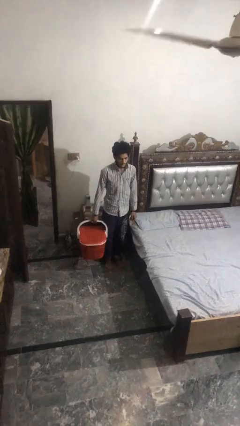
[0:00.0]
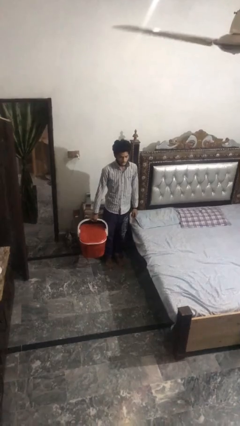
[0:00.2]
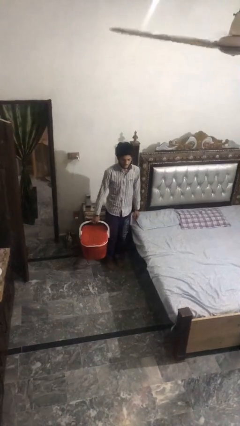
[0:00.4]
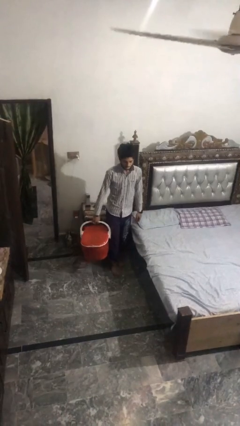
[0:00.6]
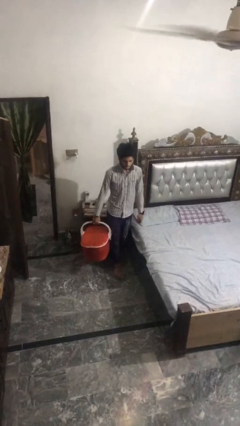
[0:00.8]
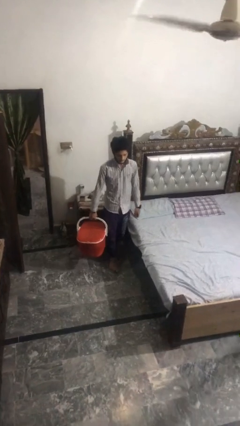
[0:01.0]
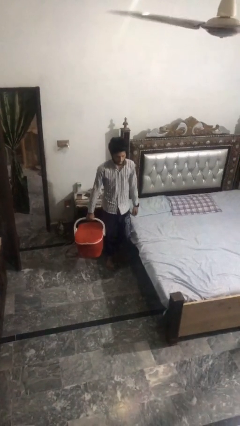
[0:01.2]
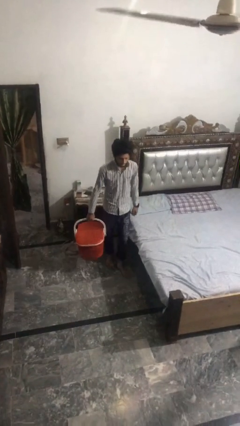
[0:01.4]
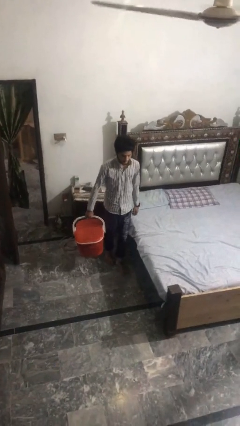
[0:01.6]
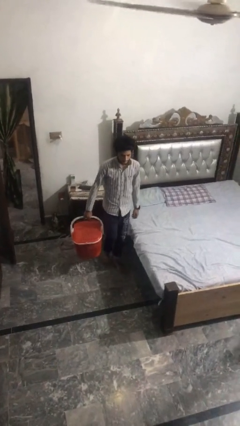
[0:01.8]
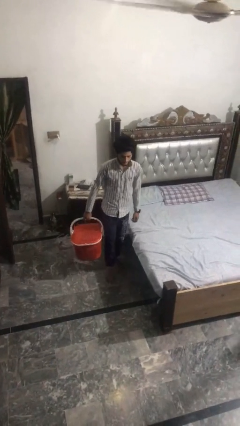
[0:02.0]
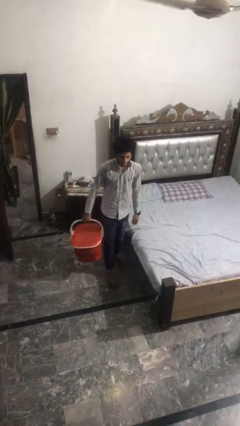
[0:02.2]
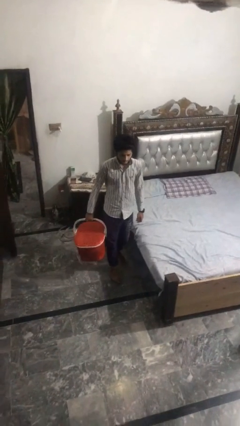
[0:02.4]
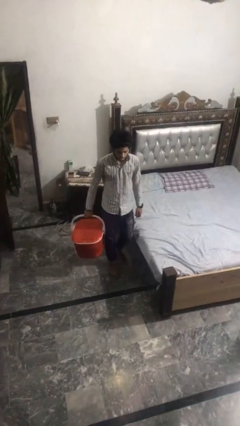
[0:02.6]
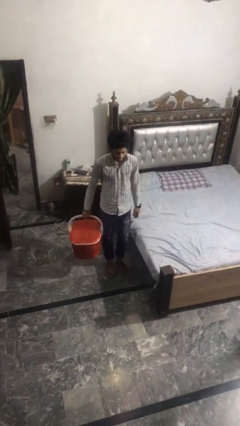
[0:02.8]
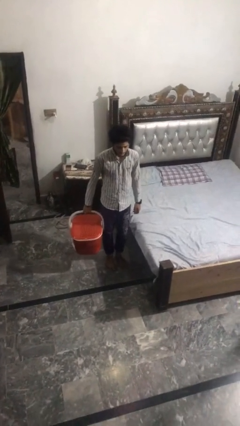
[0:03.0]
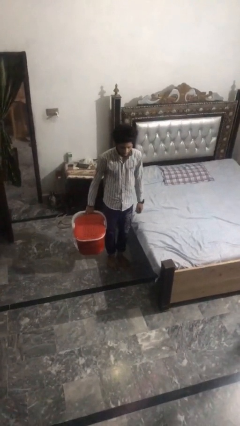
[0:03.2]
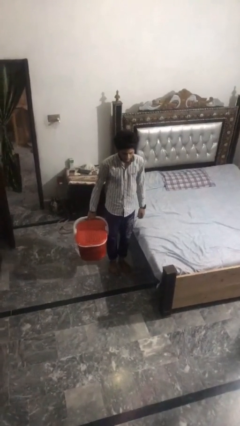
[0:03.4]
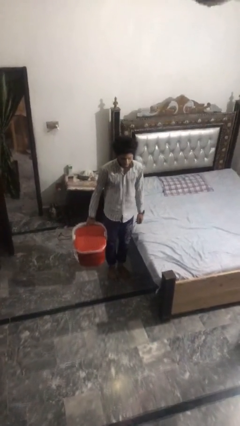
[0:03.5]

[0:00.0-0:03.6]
person carries laundry basket

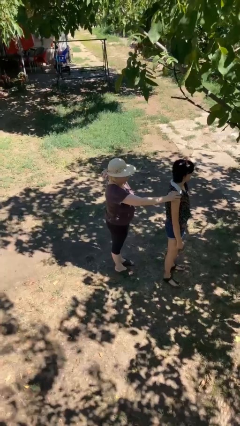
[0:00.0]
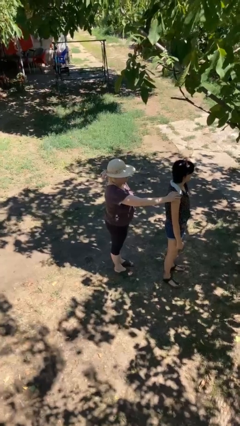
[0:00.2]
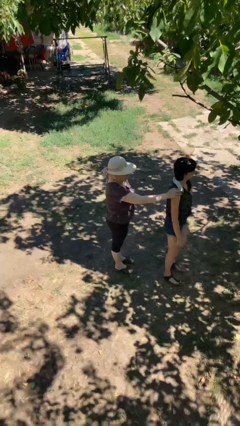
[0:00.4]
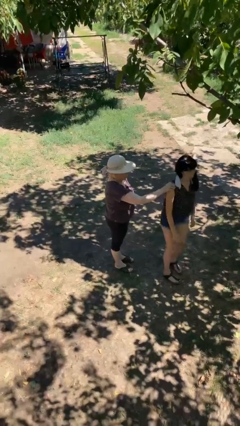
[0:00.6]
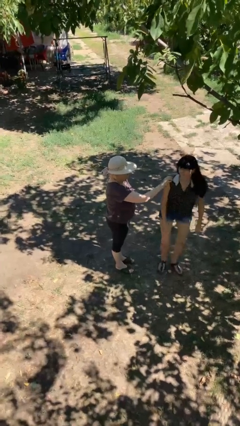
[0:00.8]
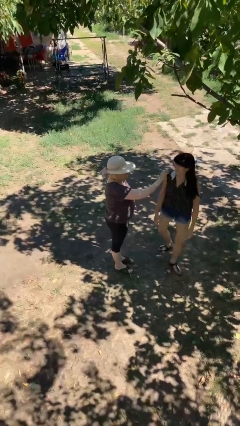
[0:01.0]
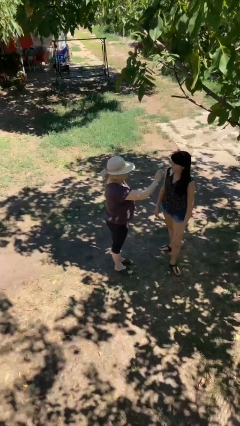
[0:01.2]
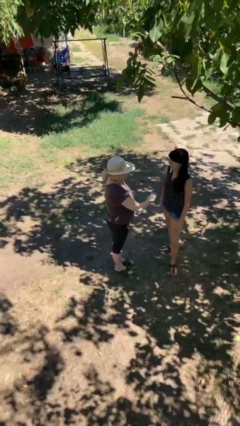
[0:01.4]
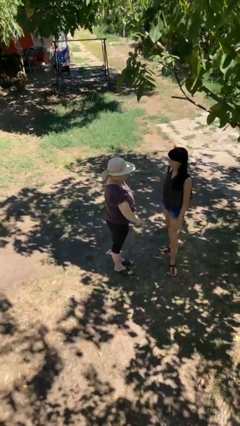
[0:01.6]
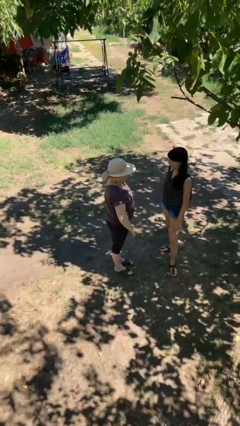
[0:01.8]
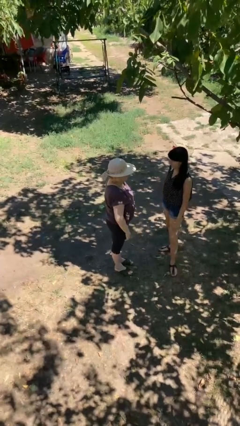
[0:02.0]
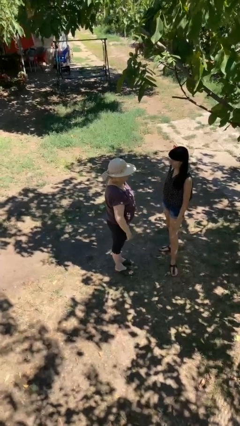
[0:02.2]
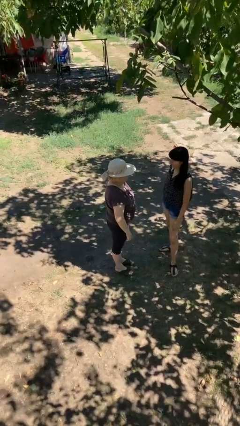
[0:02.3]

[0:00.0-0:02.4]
person spins person around

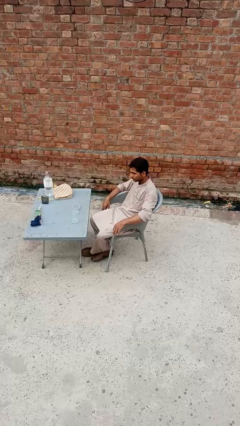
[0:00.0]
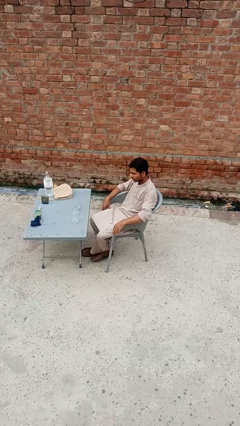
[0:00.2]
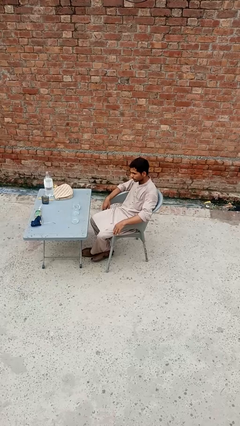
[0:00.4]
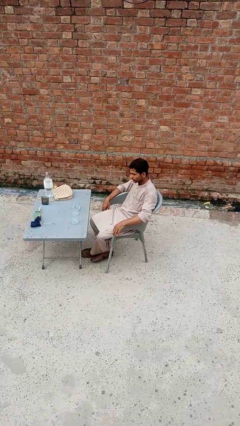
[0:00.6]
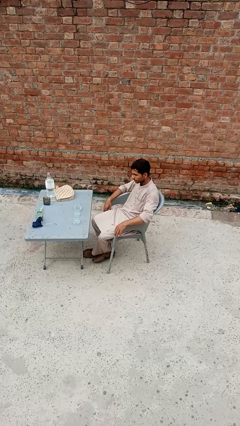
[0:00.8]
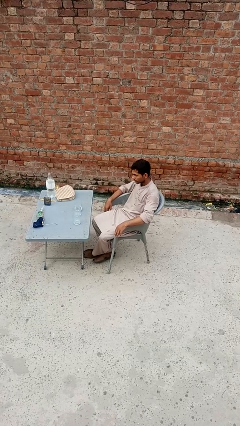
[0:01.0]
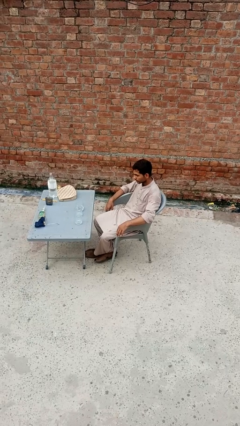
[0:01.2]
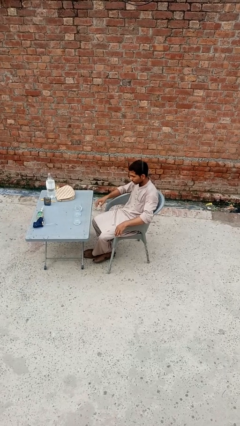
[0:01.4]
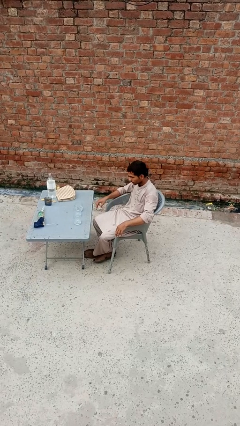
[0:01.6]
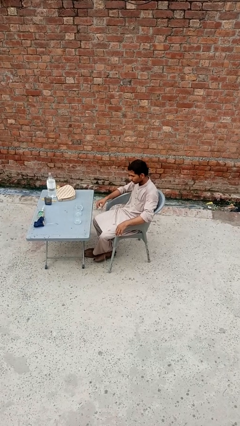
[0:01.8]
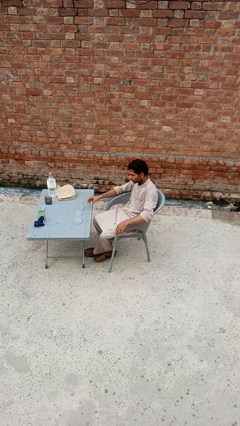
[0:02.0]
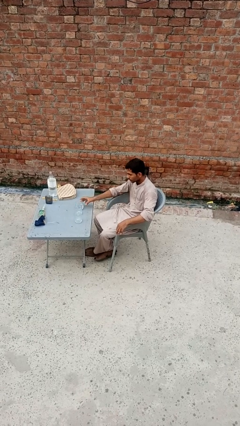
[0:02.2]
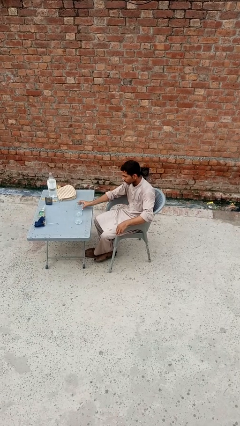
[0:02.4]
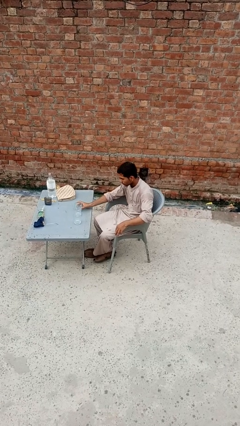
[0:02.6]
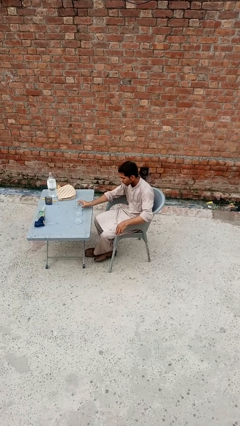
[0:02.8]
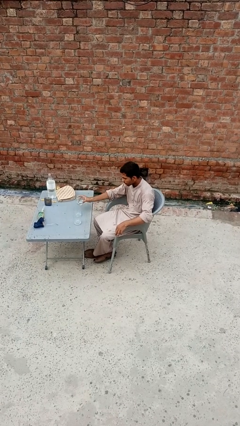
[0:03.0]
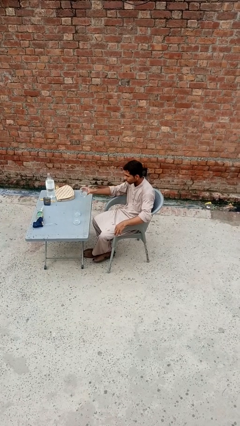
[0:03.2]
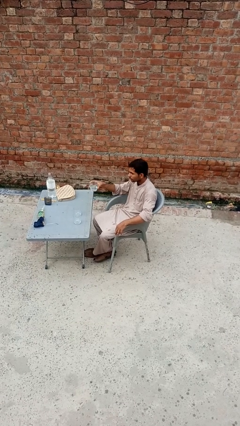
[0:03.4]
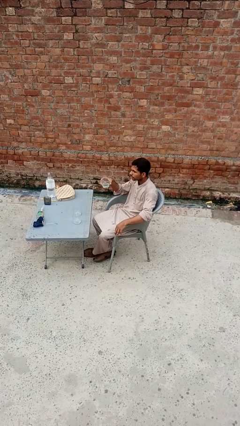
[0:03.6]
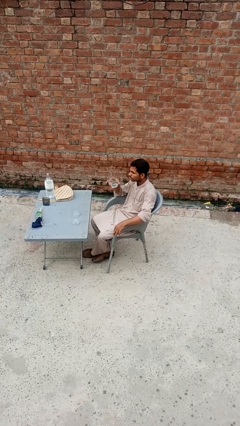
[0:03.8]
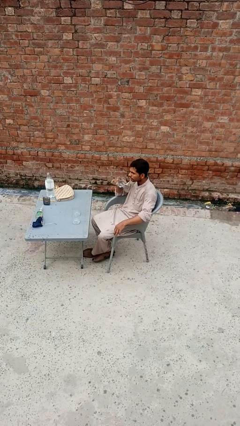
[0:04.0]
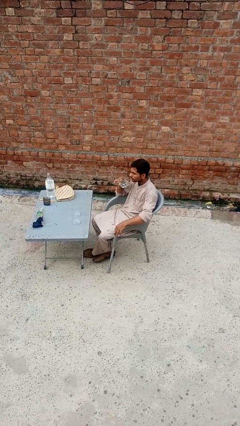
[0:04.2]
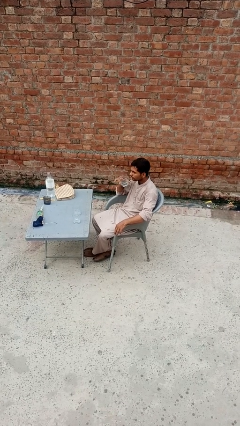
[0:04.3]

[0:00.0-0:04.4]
person picks up object from table

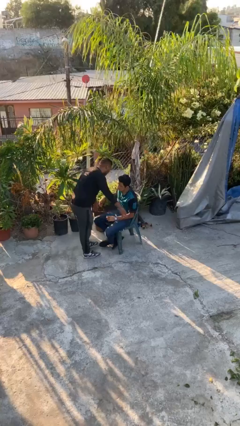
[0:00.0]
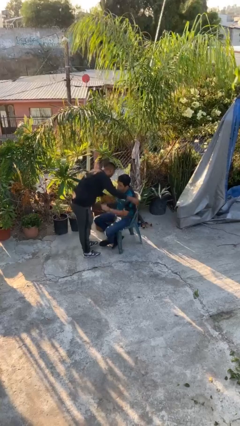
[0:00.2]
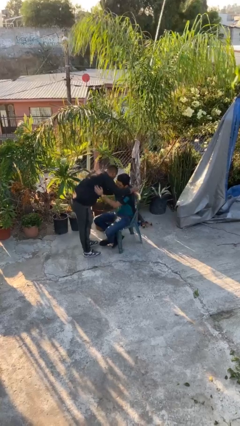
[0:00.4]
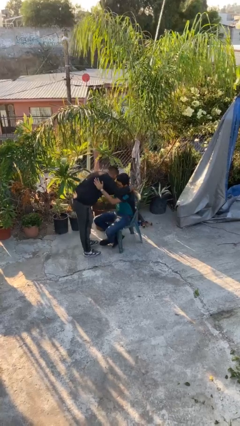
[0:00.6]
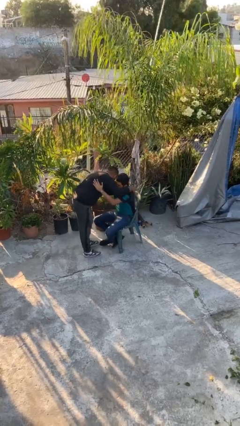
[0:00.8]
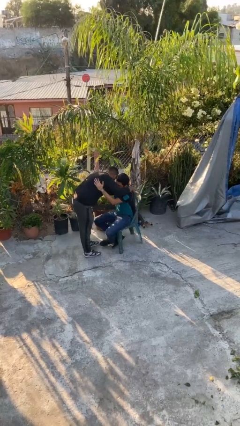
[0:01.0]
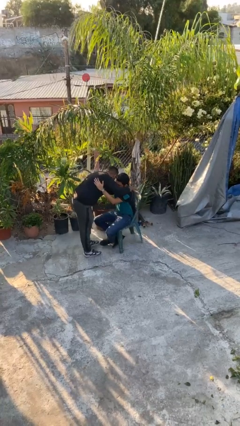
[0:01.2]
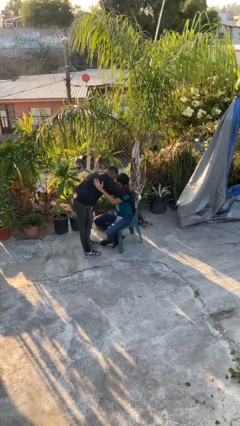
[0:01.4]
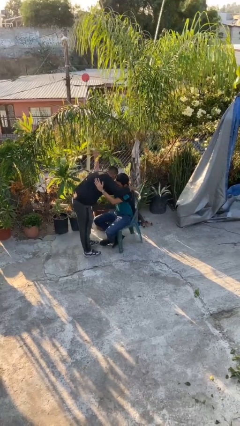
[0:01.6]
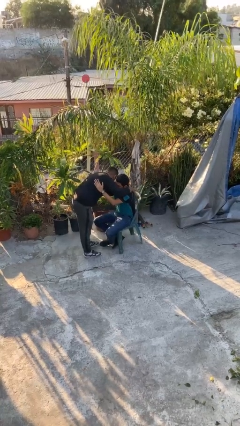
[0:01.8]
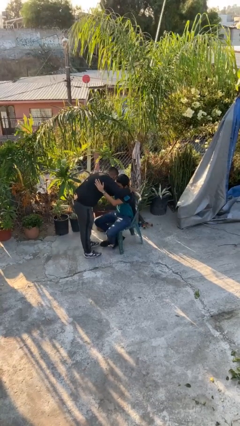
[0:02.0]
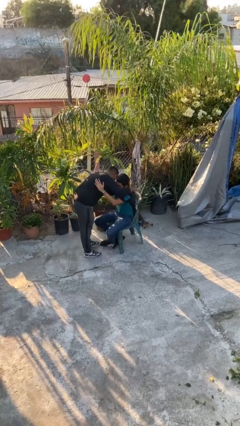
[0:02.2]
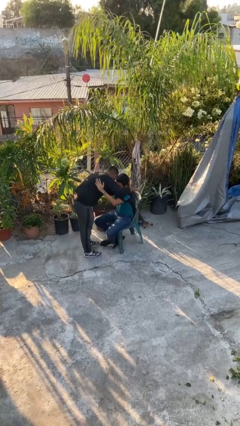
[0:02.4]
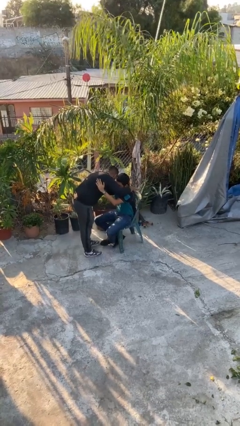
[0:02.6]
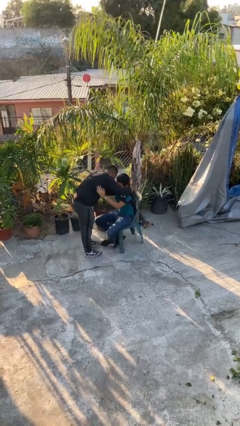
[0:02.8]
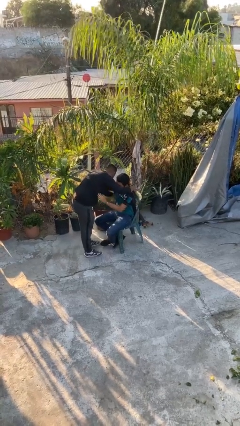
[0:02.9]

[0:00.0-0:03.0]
person embraces person

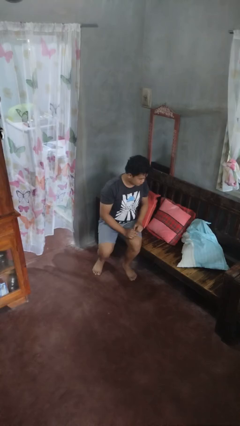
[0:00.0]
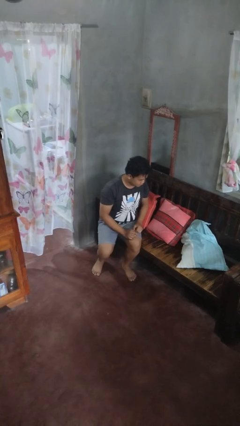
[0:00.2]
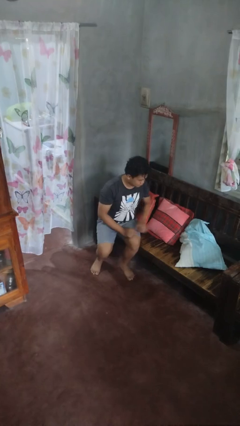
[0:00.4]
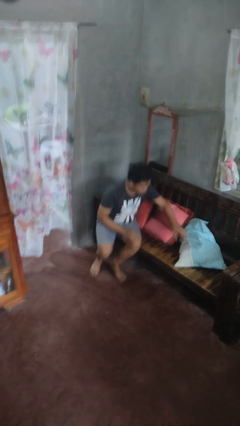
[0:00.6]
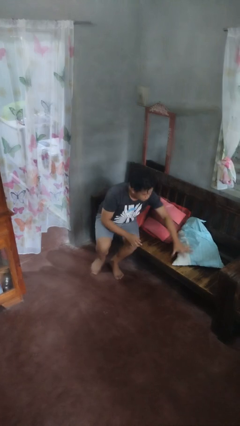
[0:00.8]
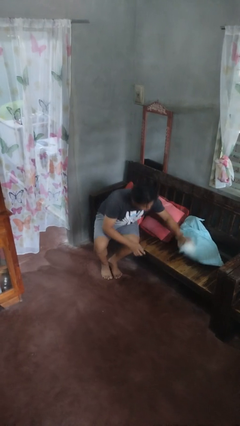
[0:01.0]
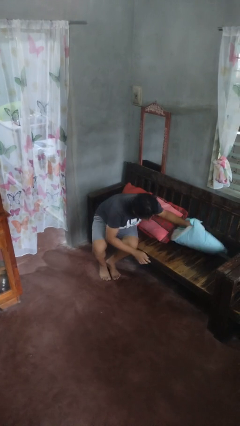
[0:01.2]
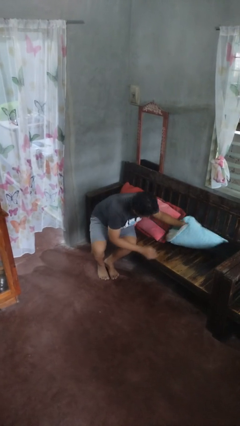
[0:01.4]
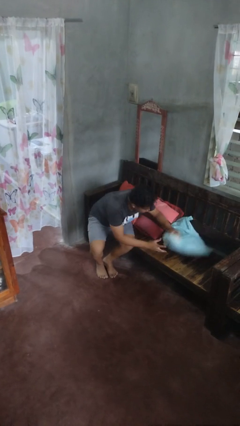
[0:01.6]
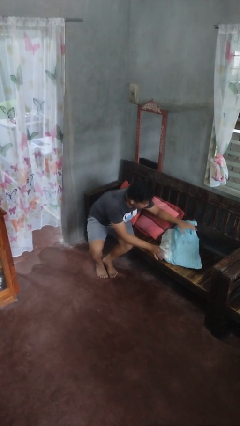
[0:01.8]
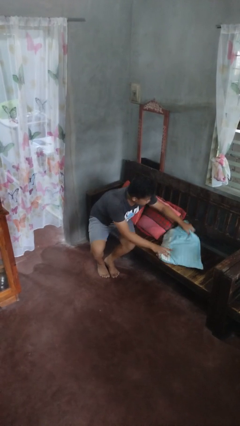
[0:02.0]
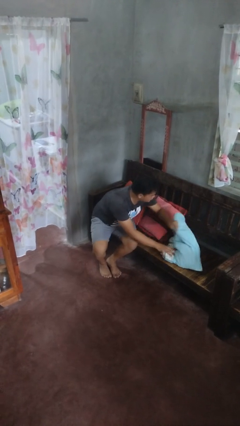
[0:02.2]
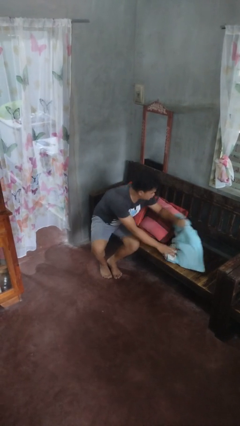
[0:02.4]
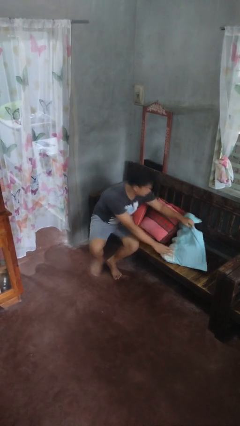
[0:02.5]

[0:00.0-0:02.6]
person searches in couch

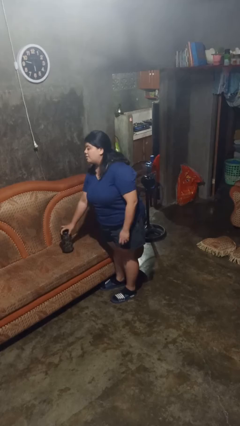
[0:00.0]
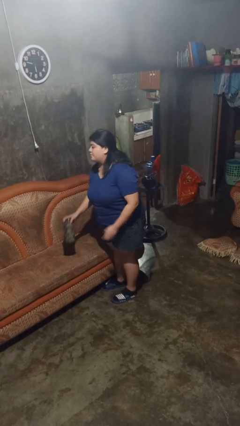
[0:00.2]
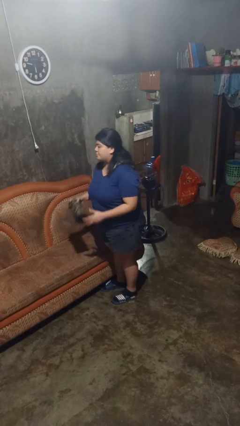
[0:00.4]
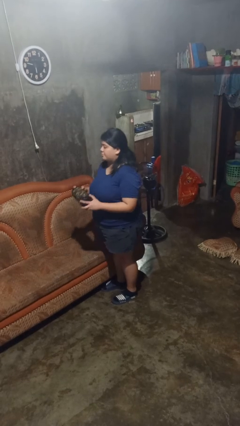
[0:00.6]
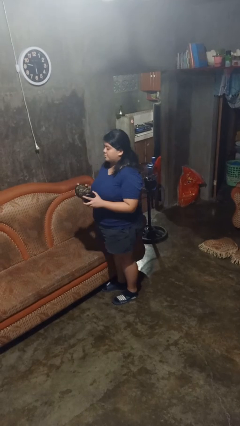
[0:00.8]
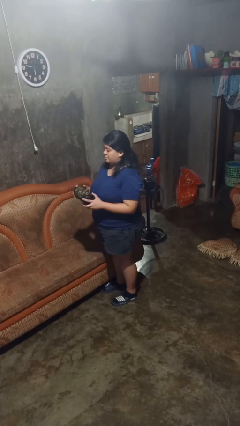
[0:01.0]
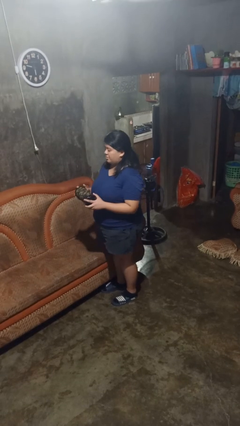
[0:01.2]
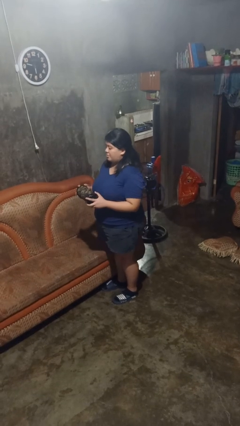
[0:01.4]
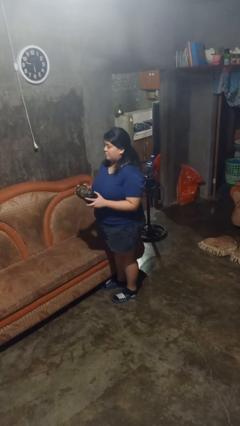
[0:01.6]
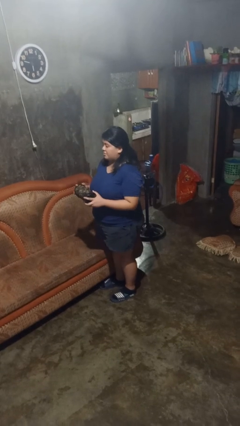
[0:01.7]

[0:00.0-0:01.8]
person picks up object from couch
